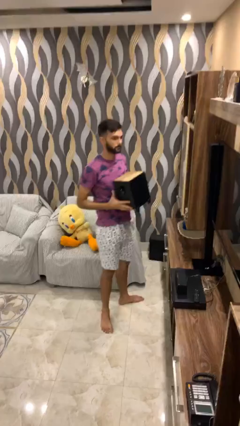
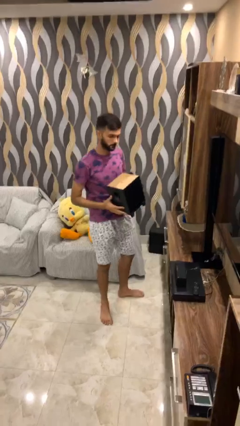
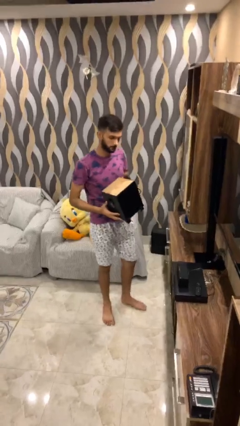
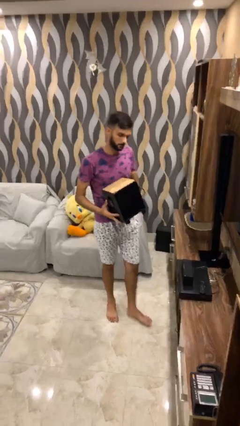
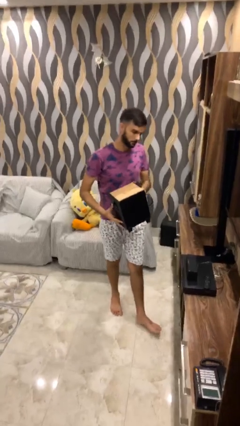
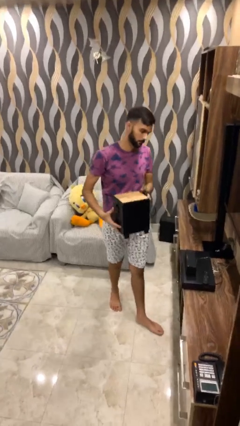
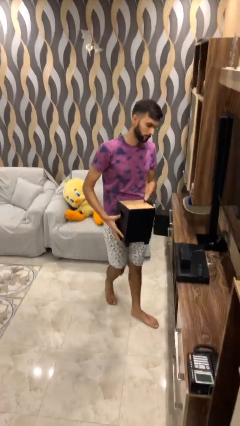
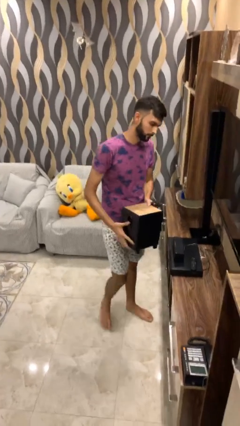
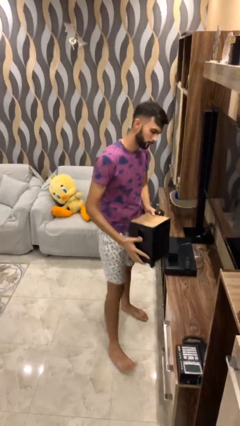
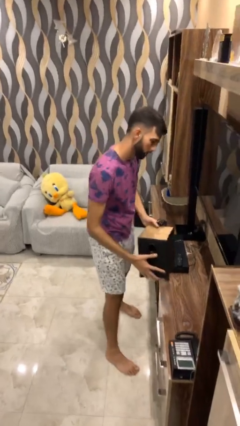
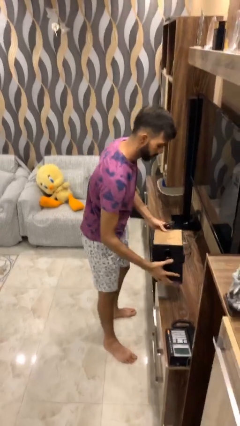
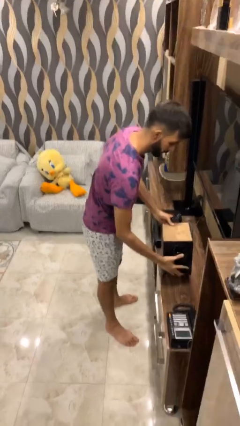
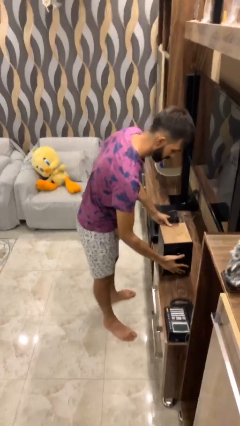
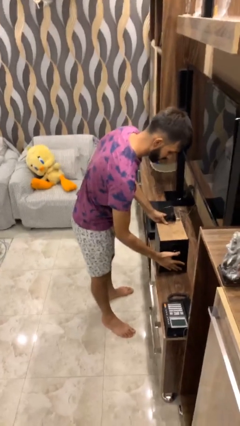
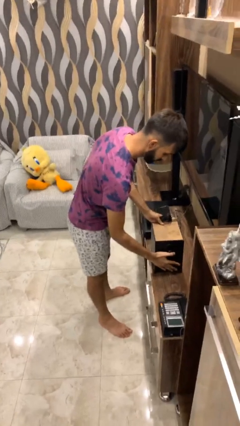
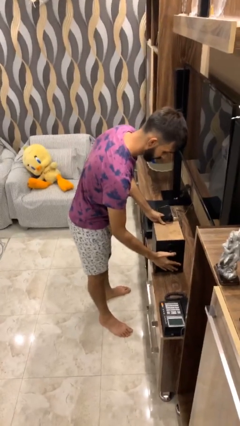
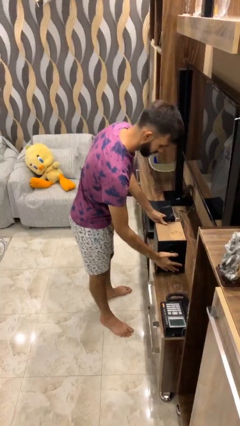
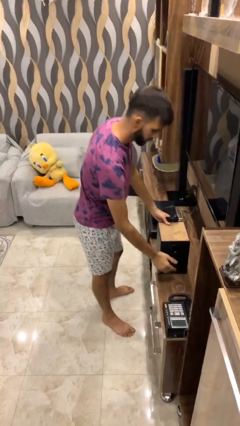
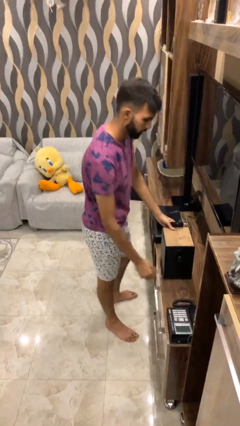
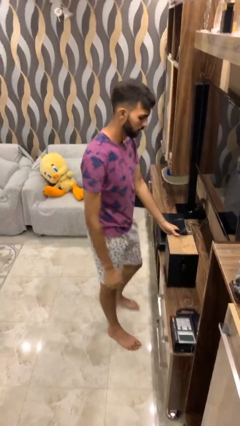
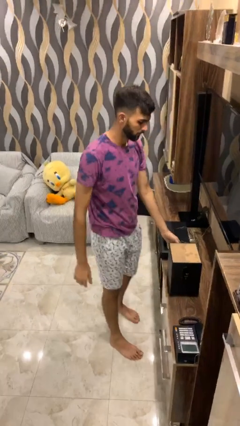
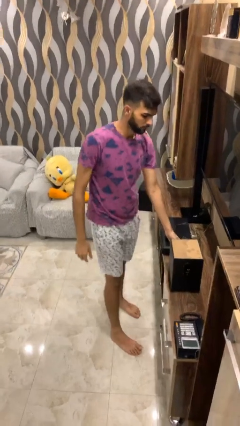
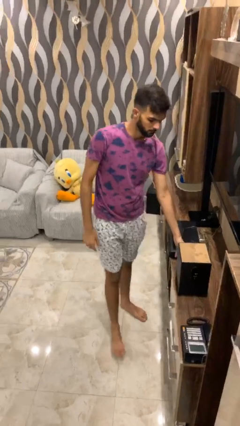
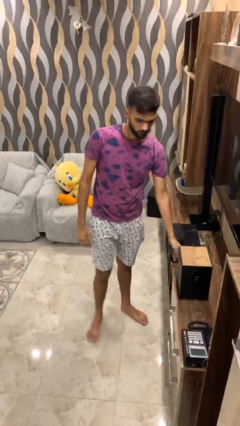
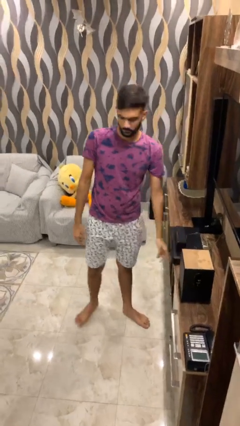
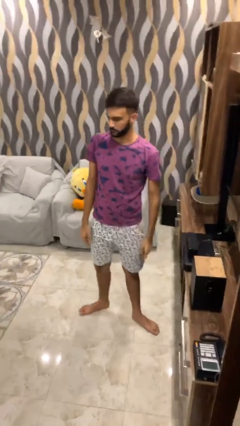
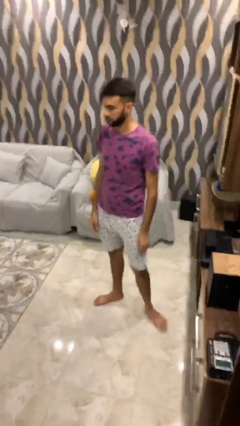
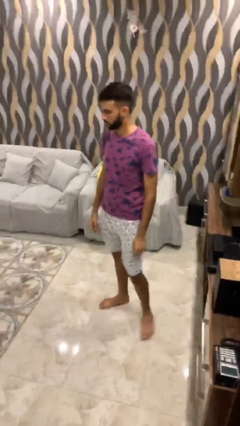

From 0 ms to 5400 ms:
person puts down object on table

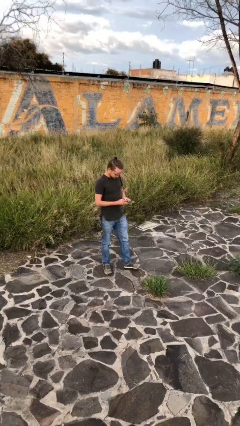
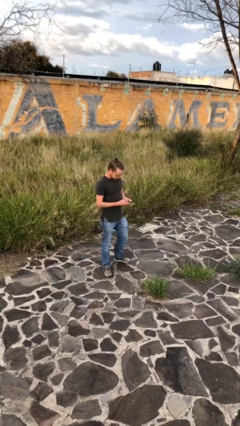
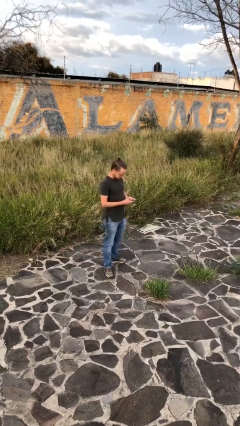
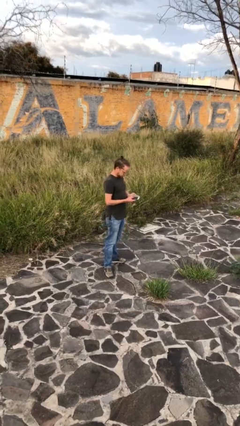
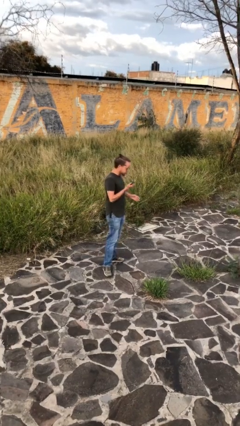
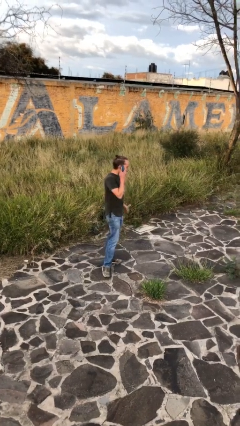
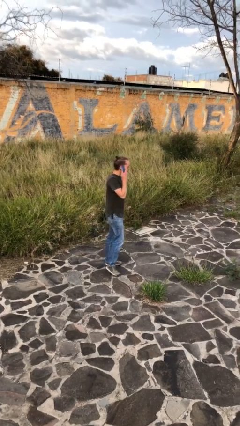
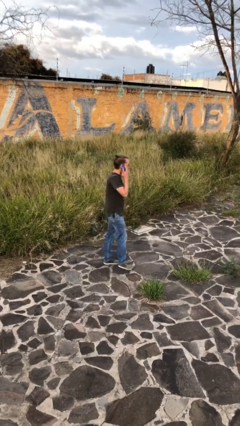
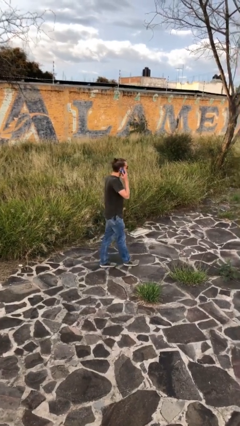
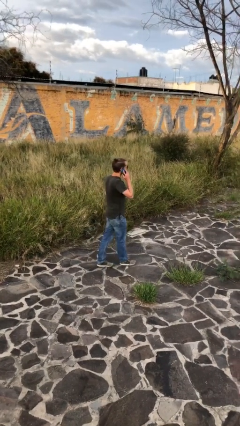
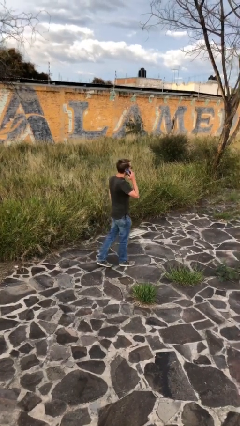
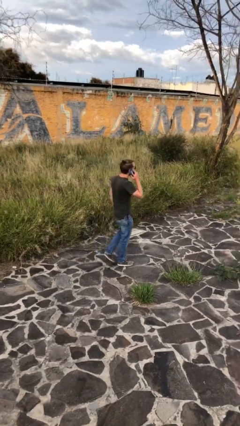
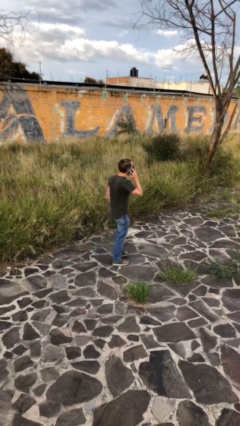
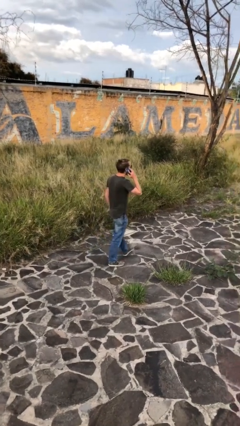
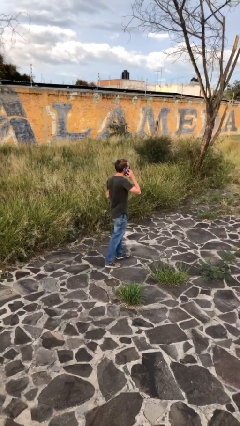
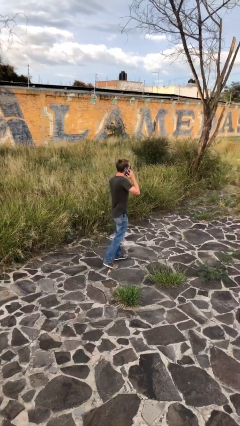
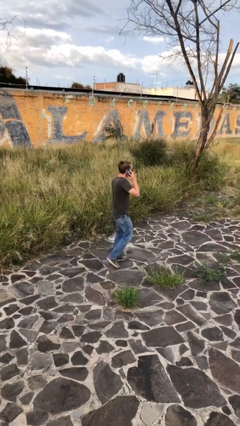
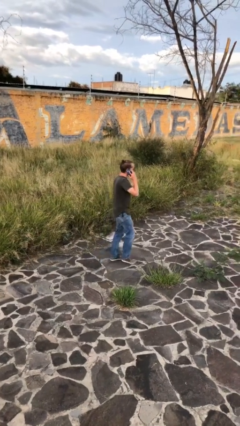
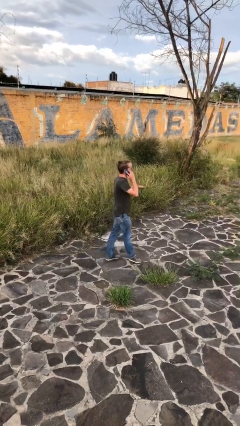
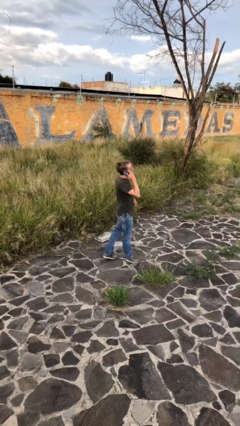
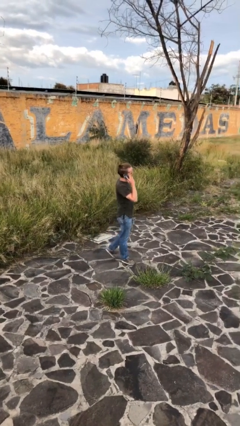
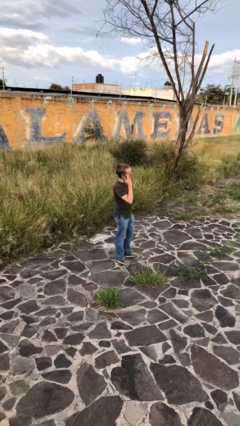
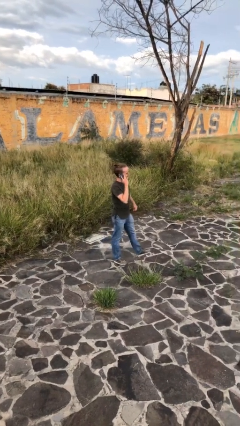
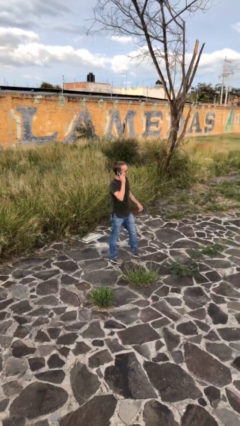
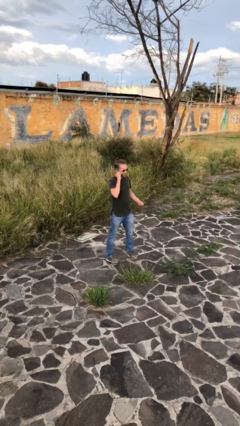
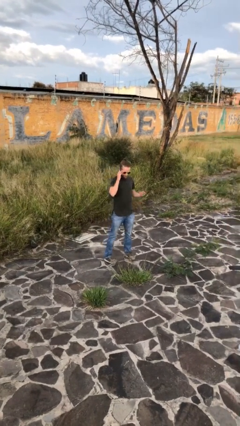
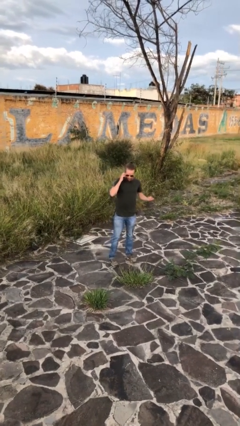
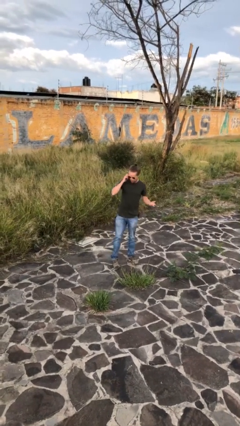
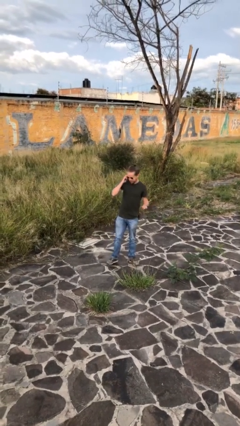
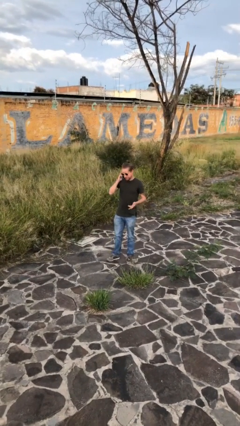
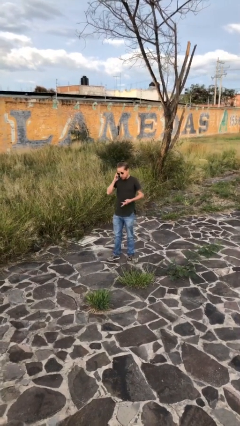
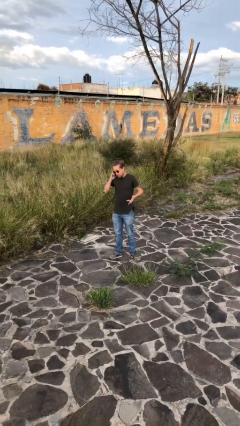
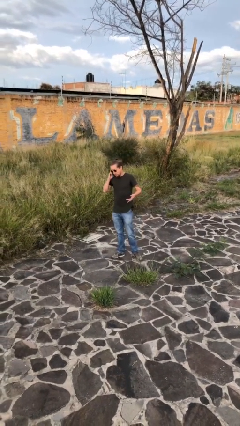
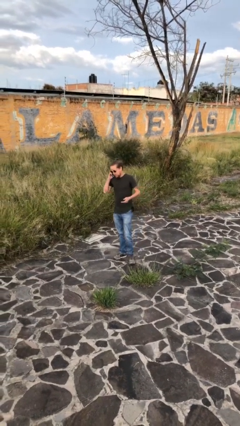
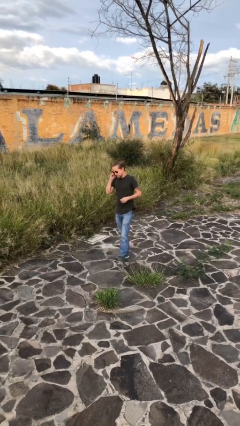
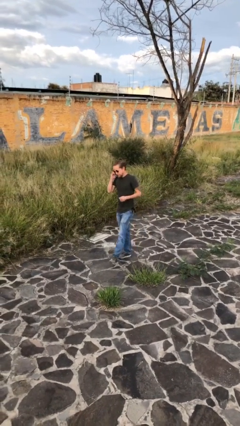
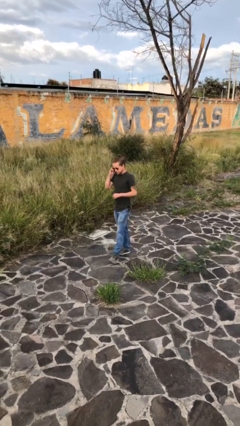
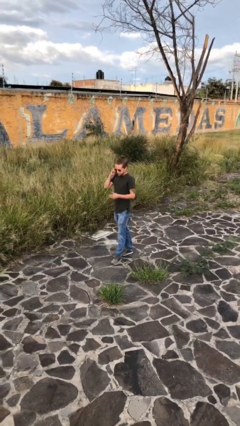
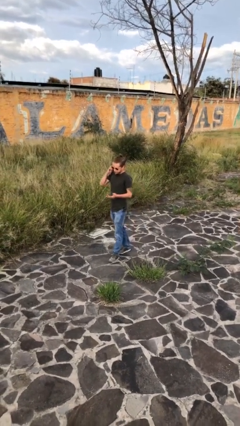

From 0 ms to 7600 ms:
person talks on phone

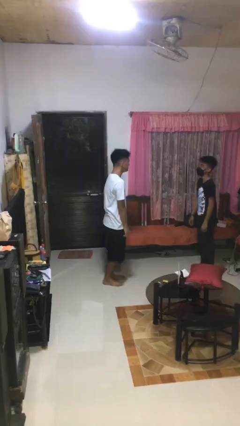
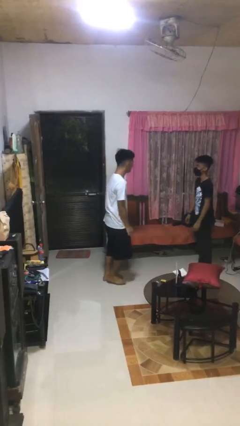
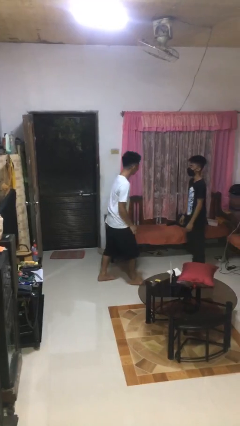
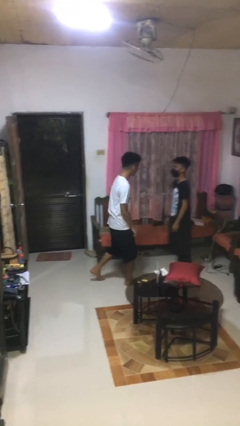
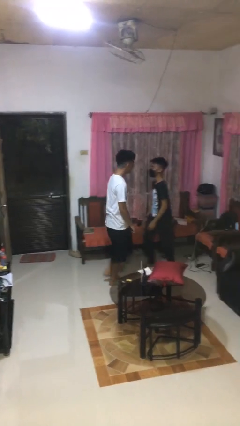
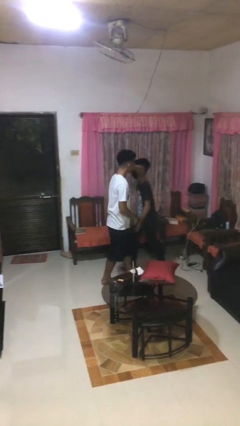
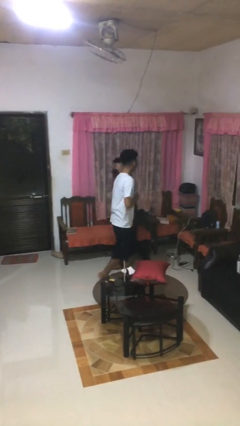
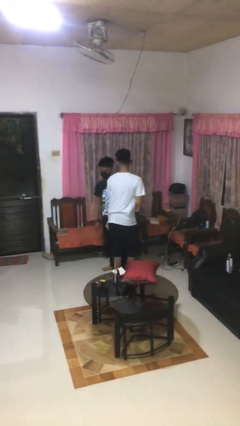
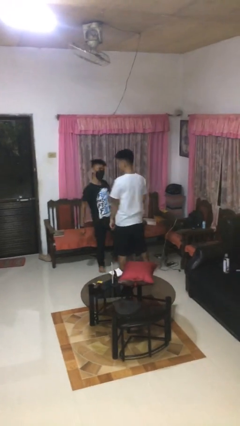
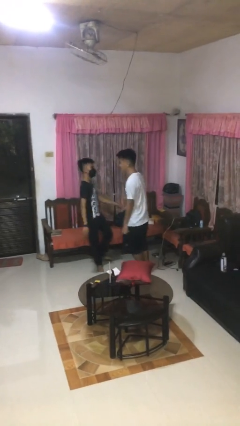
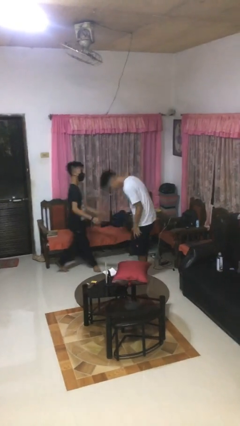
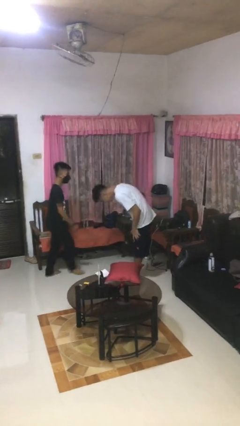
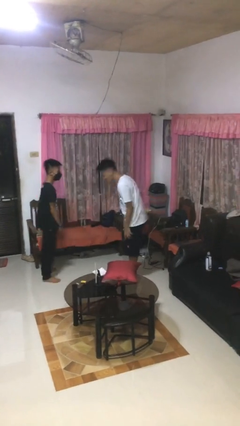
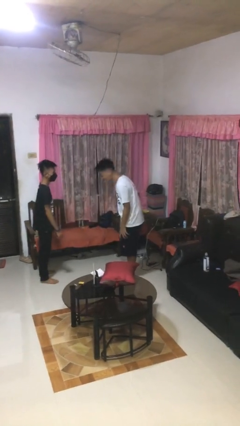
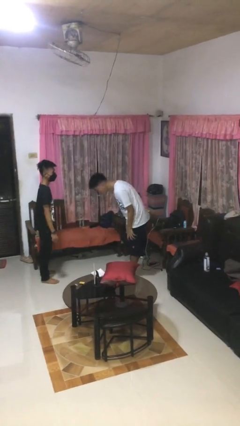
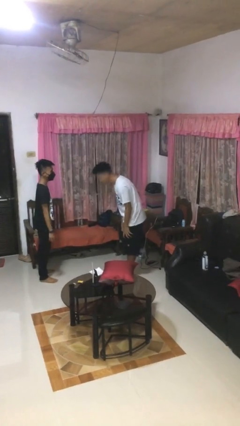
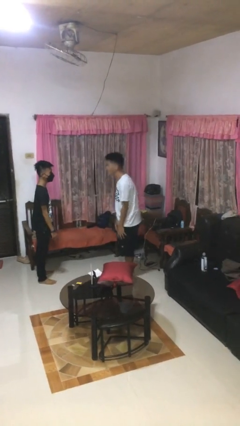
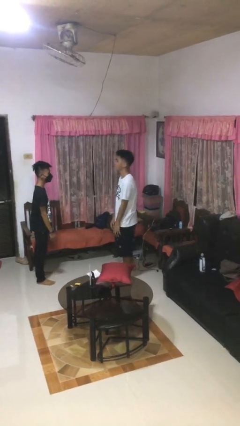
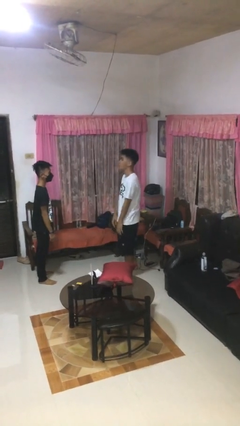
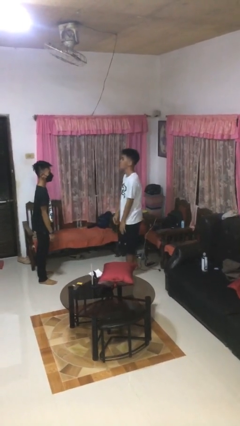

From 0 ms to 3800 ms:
person bumps into person

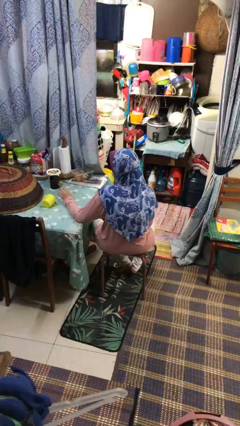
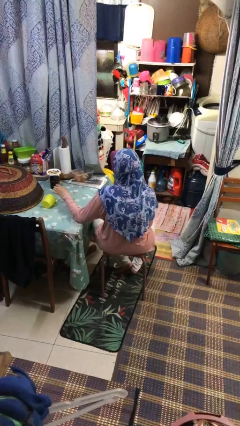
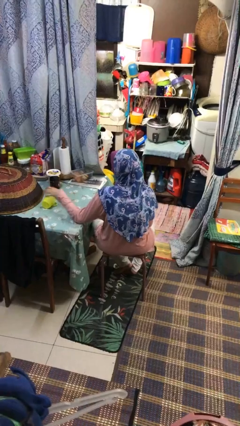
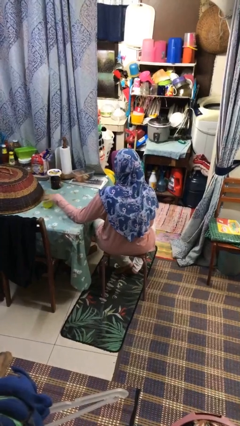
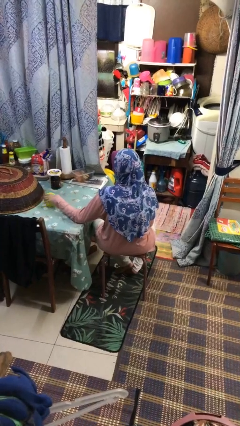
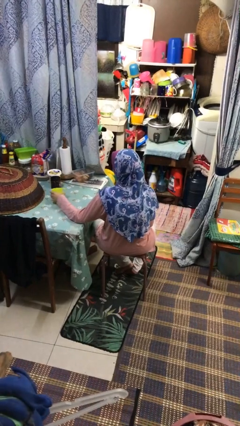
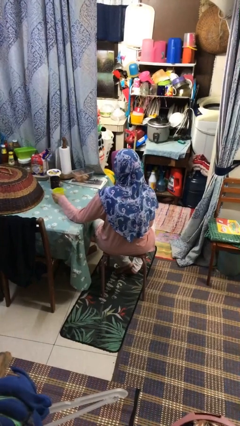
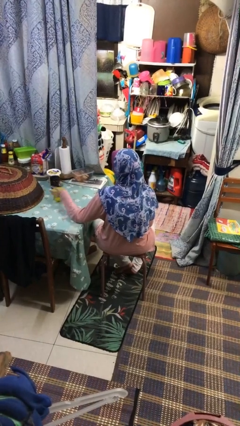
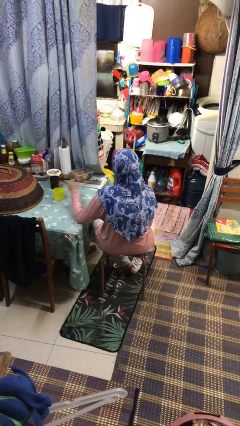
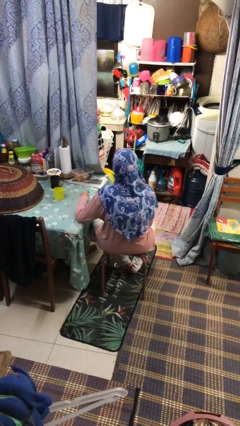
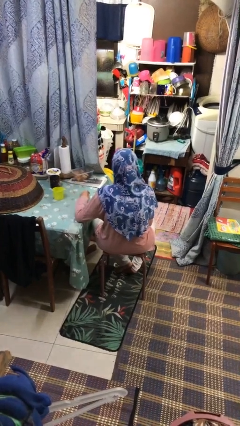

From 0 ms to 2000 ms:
person sets upright glass
